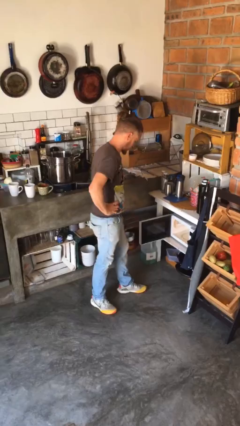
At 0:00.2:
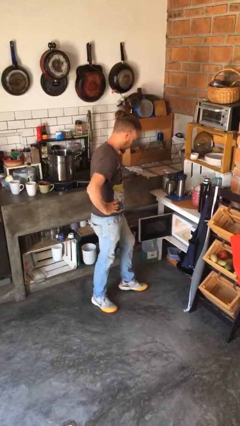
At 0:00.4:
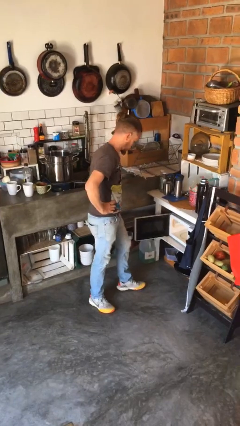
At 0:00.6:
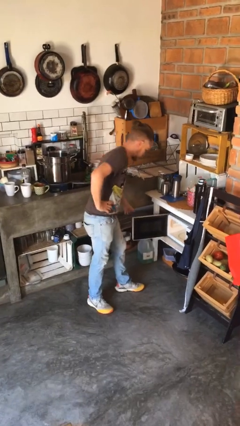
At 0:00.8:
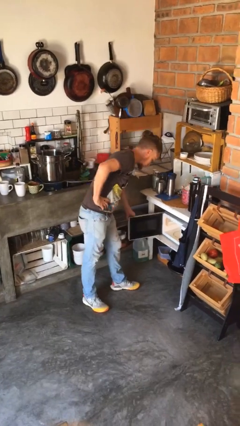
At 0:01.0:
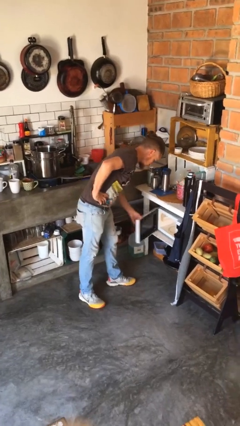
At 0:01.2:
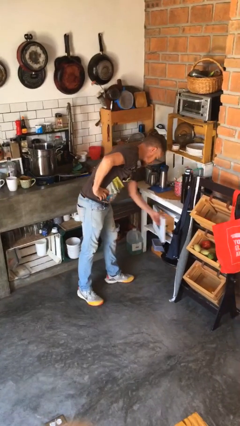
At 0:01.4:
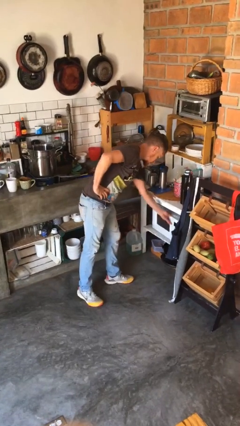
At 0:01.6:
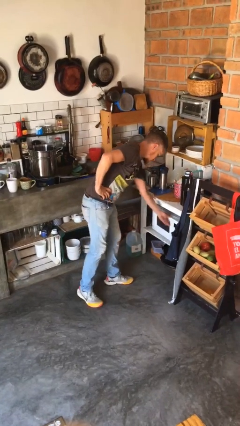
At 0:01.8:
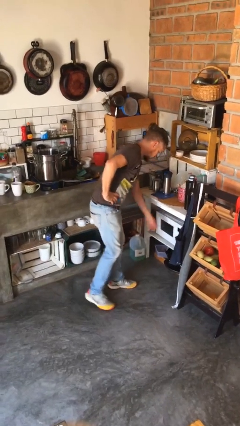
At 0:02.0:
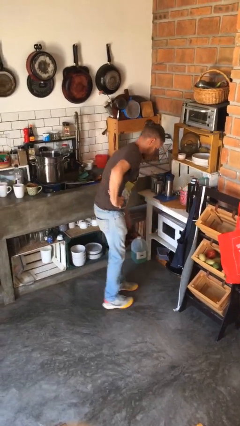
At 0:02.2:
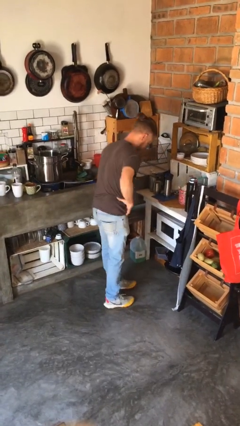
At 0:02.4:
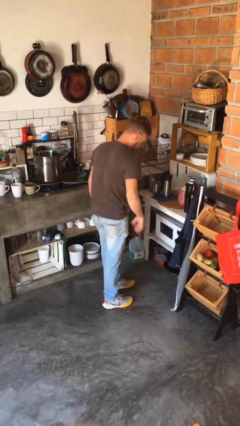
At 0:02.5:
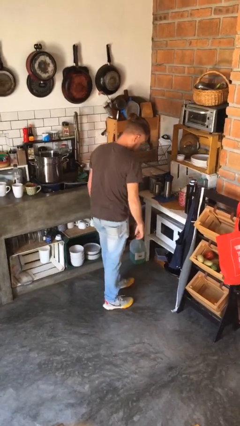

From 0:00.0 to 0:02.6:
person closes microwave

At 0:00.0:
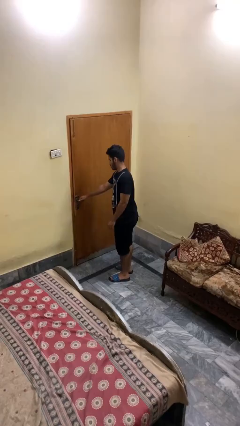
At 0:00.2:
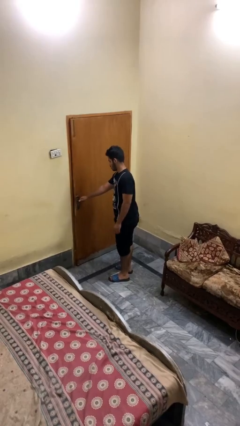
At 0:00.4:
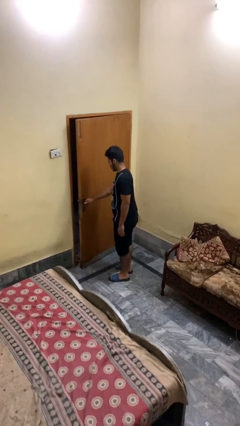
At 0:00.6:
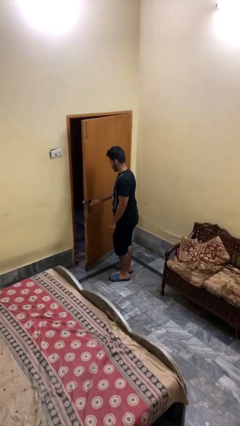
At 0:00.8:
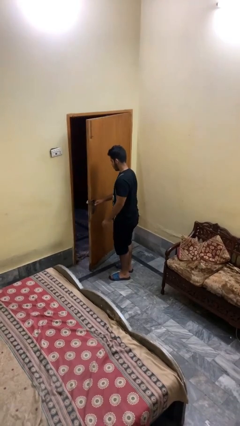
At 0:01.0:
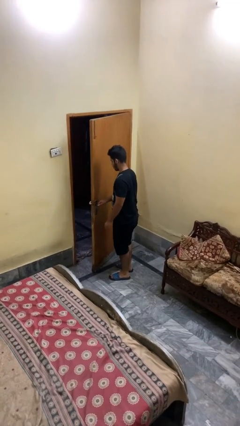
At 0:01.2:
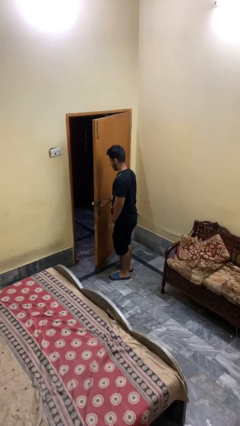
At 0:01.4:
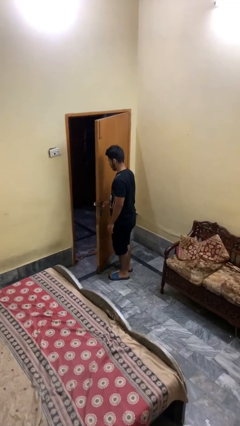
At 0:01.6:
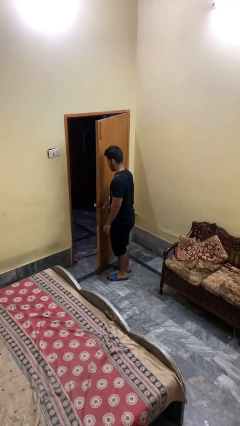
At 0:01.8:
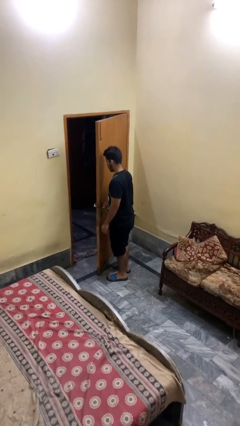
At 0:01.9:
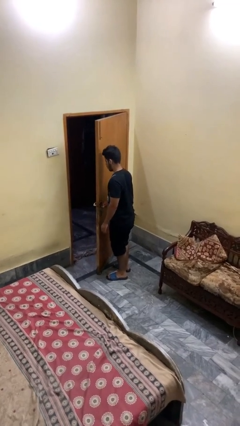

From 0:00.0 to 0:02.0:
person opens facility door

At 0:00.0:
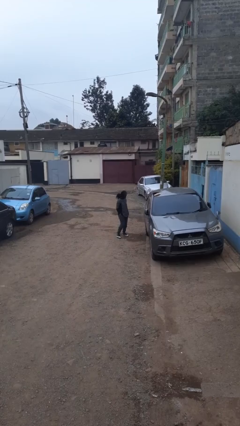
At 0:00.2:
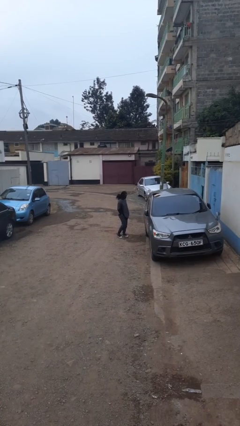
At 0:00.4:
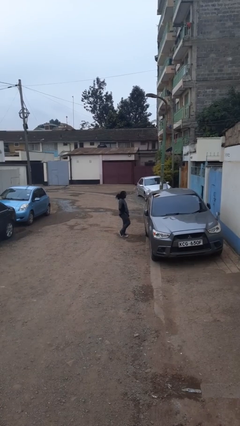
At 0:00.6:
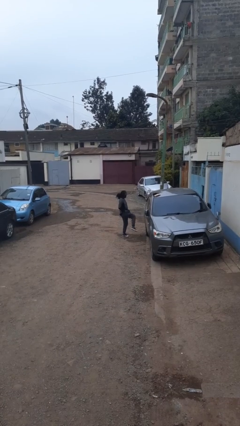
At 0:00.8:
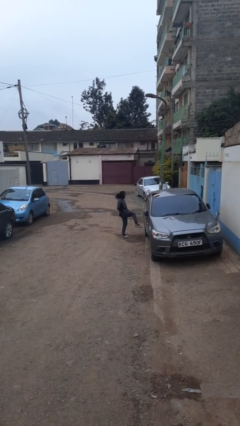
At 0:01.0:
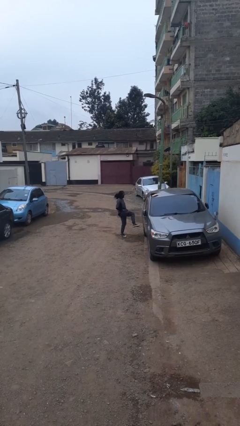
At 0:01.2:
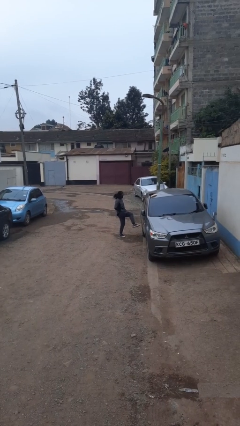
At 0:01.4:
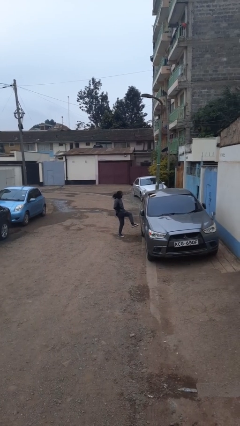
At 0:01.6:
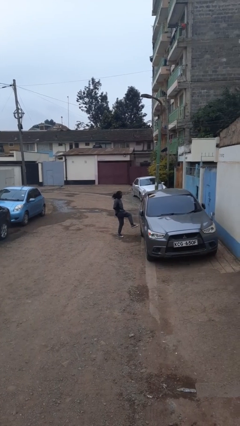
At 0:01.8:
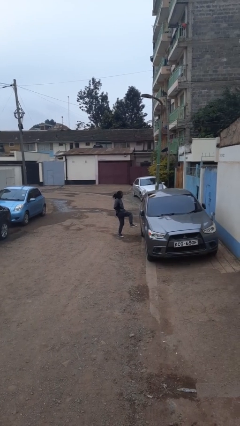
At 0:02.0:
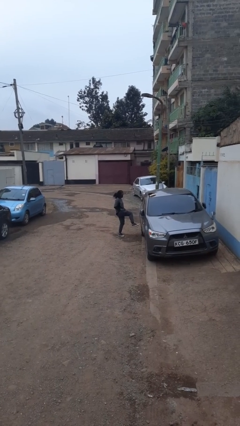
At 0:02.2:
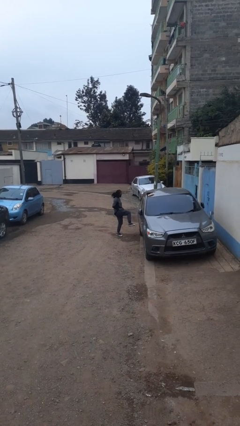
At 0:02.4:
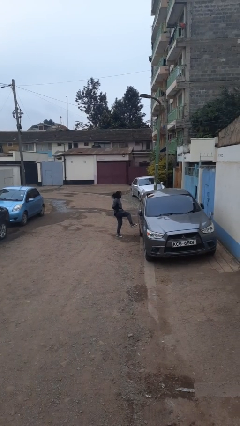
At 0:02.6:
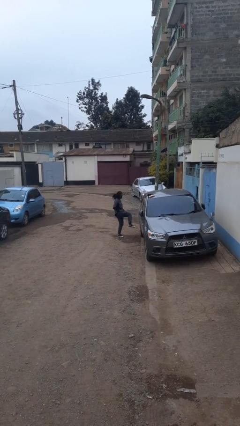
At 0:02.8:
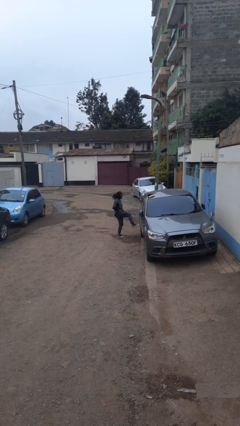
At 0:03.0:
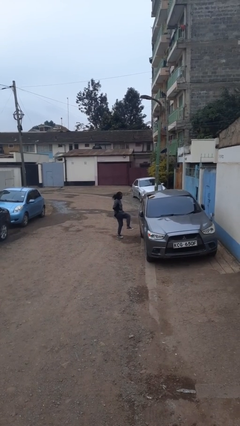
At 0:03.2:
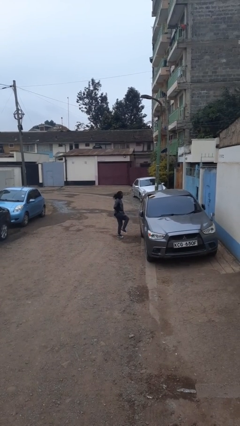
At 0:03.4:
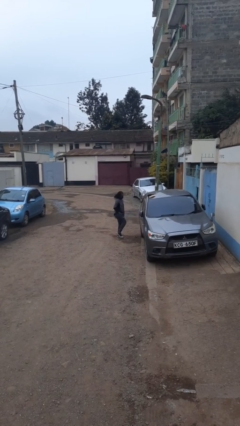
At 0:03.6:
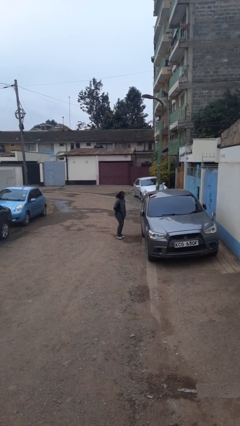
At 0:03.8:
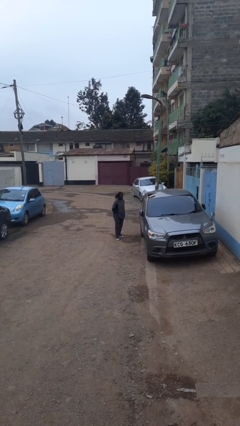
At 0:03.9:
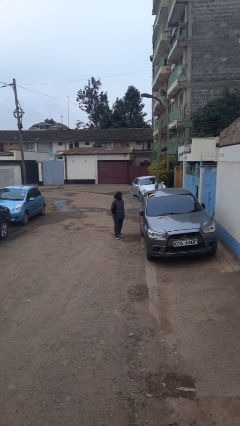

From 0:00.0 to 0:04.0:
person kicks car tires

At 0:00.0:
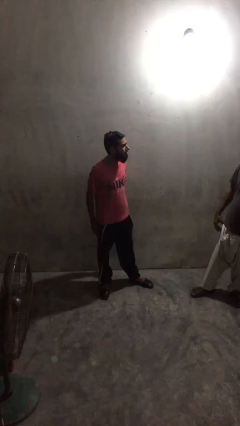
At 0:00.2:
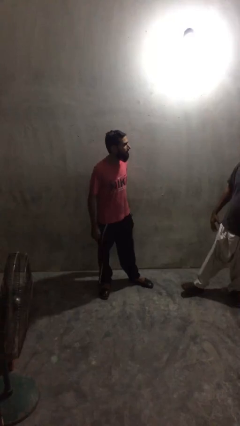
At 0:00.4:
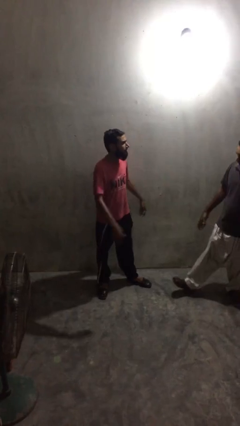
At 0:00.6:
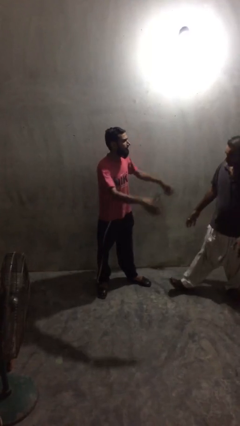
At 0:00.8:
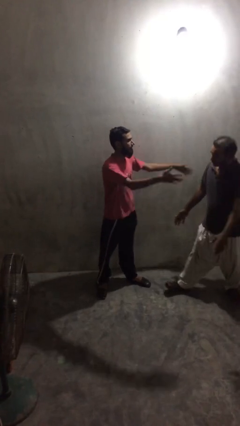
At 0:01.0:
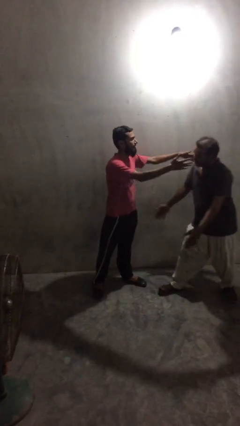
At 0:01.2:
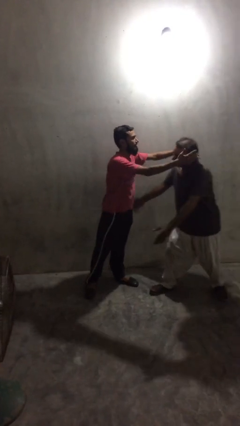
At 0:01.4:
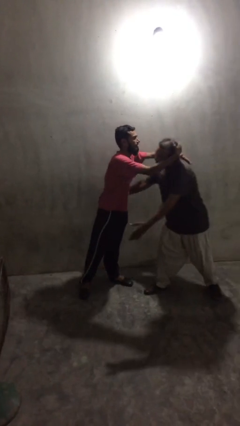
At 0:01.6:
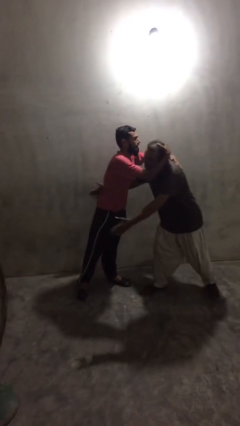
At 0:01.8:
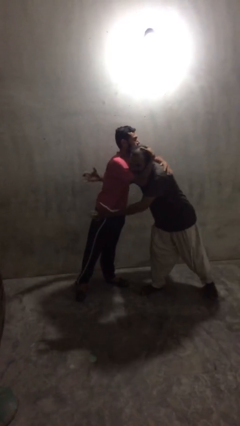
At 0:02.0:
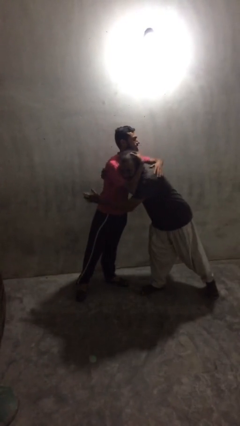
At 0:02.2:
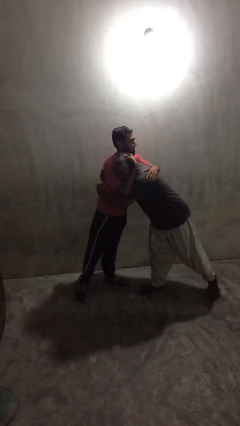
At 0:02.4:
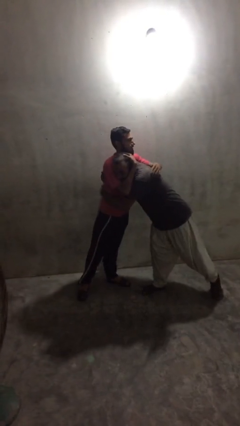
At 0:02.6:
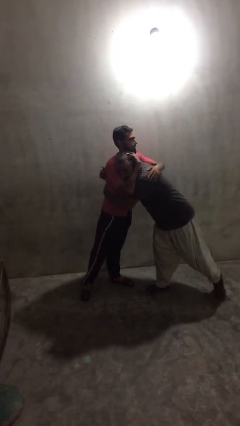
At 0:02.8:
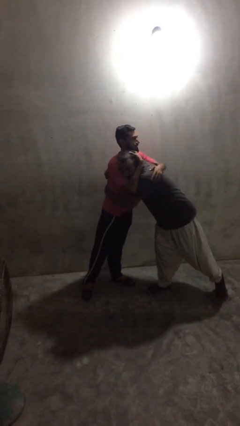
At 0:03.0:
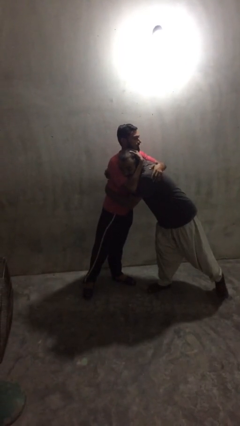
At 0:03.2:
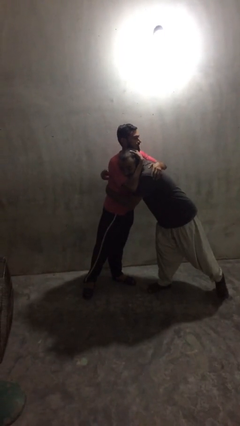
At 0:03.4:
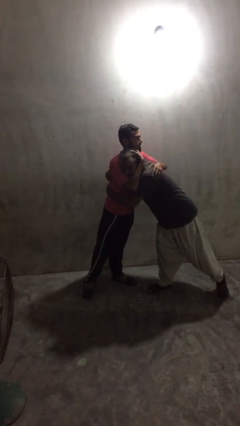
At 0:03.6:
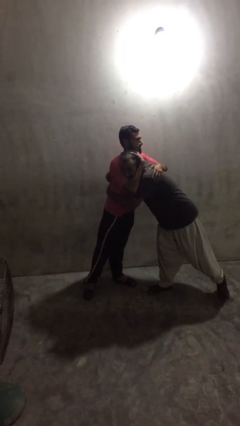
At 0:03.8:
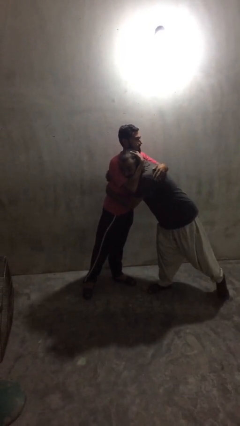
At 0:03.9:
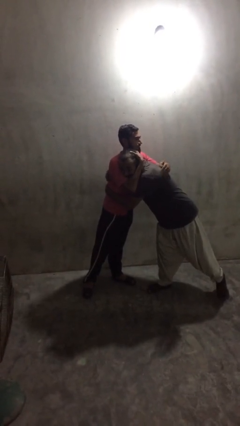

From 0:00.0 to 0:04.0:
person embraces person

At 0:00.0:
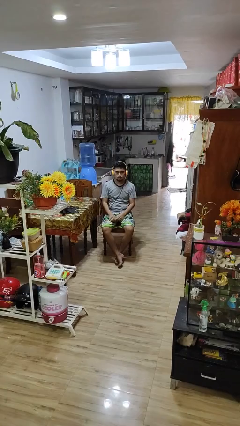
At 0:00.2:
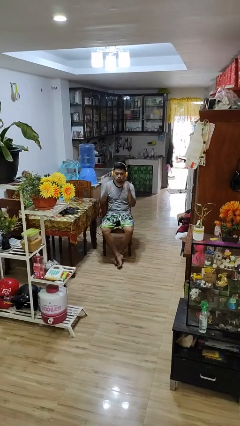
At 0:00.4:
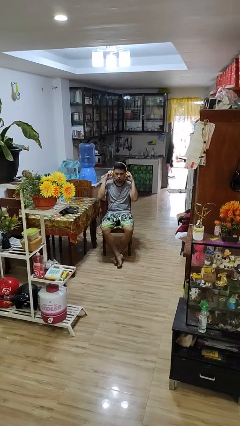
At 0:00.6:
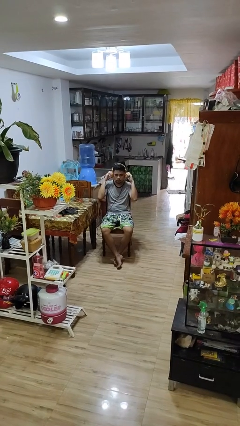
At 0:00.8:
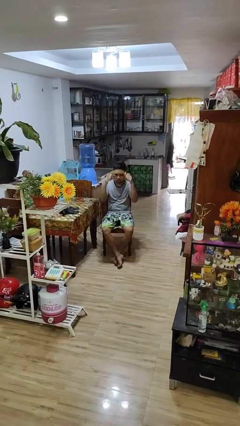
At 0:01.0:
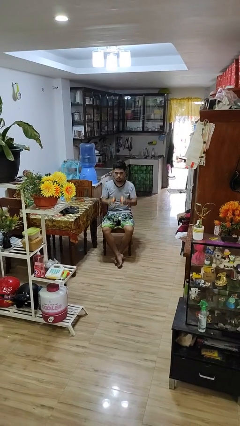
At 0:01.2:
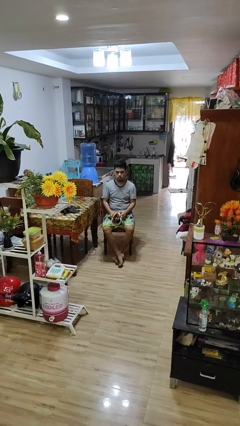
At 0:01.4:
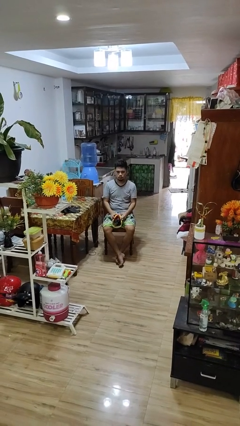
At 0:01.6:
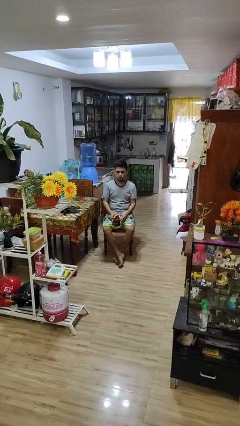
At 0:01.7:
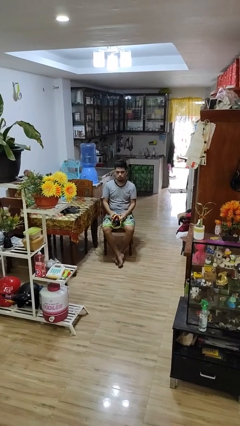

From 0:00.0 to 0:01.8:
person takes off headphones

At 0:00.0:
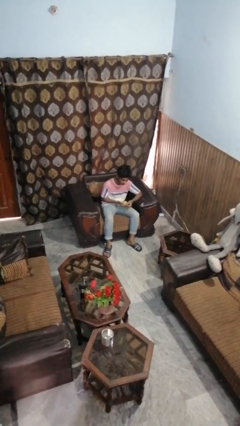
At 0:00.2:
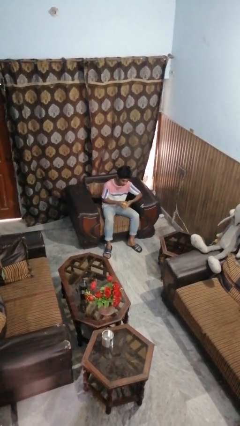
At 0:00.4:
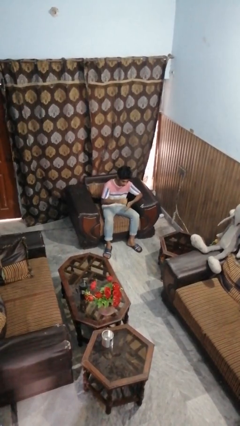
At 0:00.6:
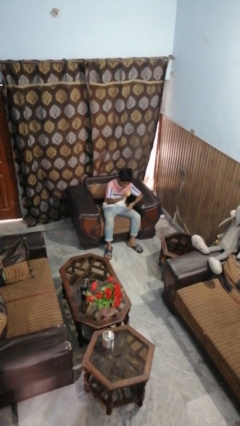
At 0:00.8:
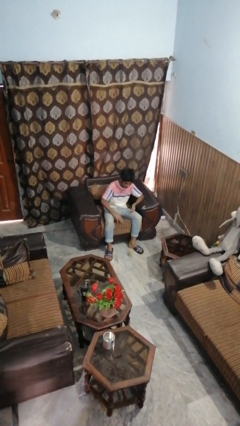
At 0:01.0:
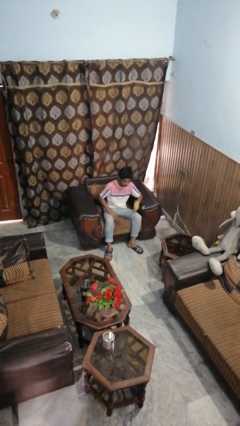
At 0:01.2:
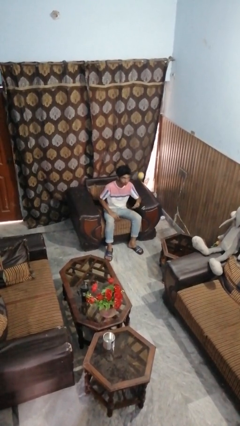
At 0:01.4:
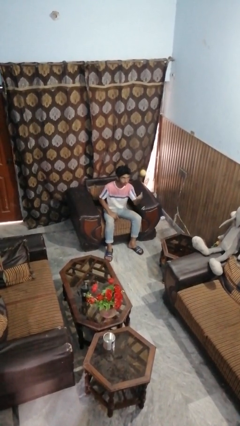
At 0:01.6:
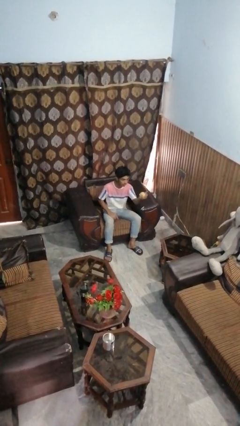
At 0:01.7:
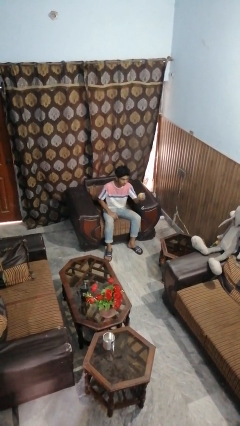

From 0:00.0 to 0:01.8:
person bounces ball on floor

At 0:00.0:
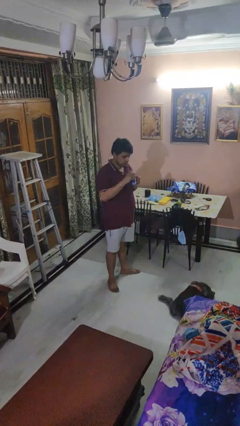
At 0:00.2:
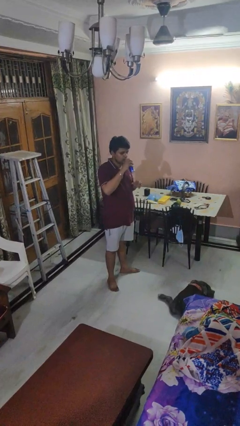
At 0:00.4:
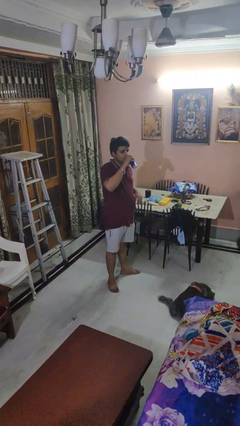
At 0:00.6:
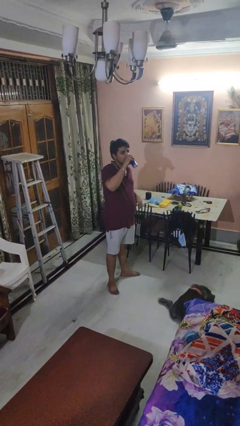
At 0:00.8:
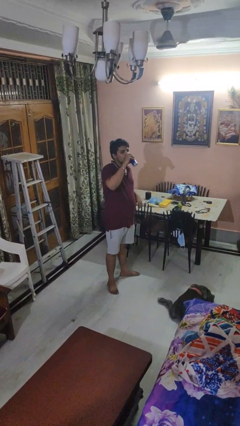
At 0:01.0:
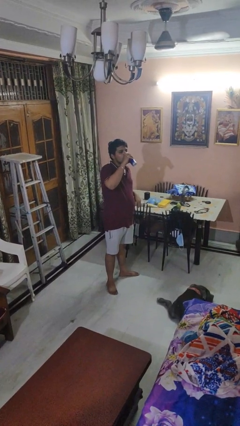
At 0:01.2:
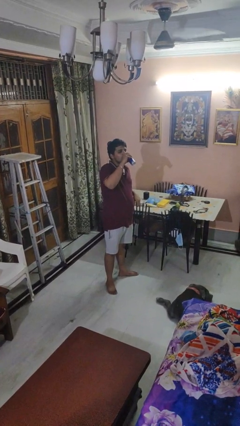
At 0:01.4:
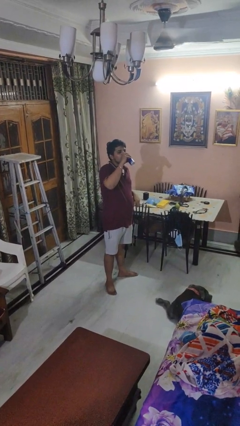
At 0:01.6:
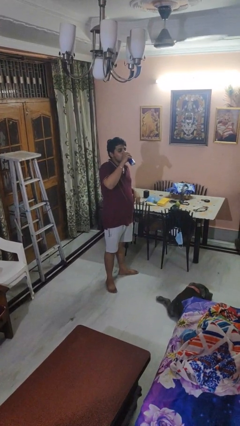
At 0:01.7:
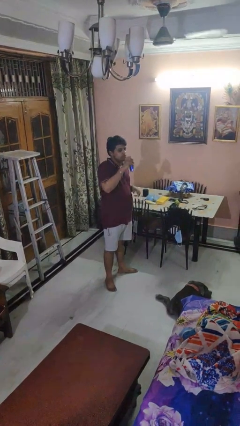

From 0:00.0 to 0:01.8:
person drinks from beverage can
